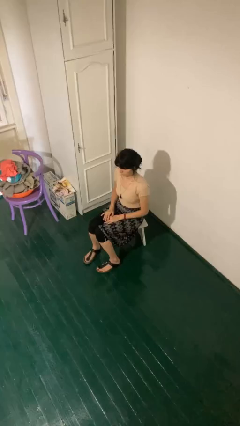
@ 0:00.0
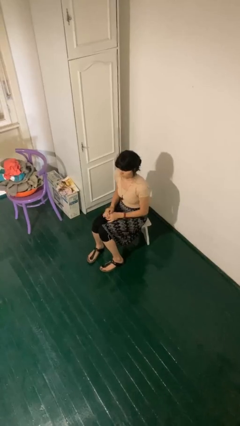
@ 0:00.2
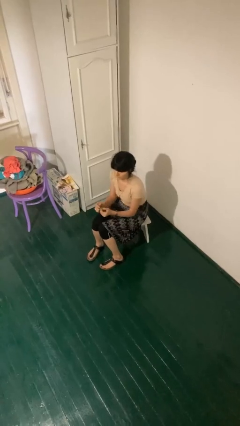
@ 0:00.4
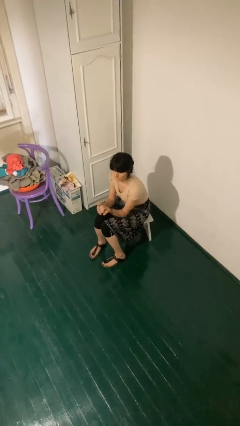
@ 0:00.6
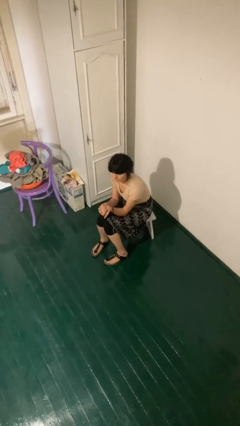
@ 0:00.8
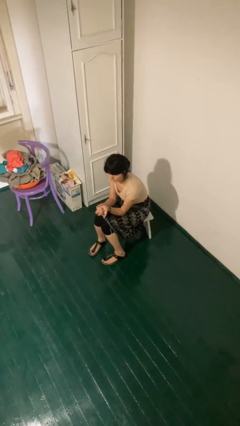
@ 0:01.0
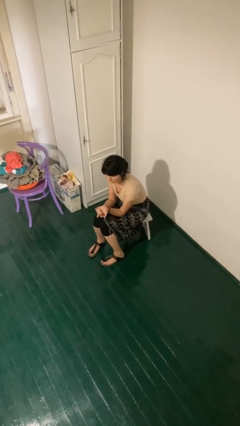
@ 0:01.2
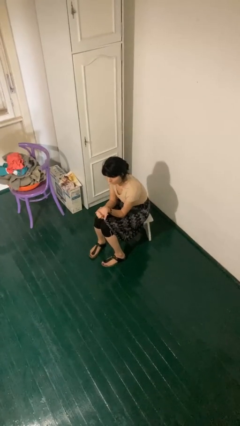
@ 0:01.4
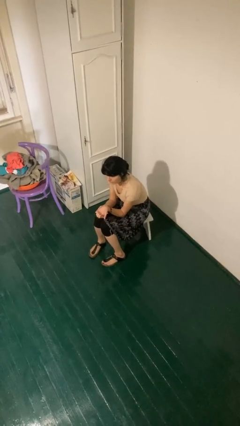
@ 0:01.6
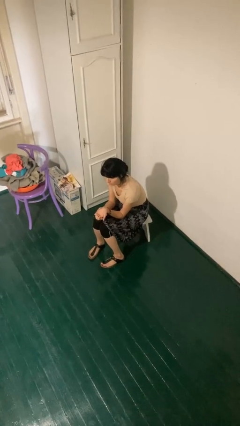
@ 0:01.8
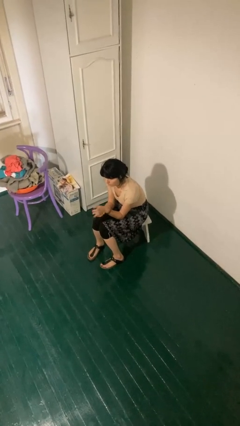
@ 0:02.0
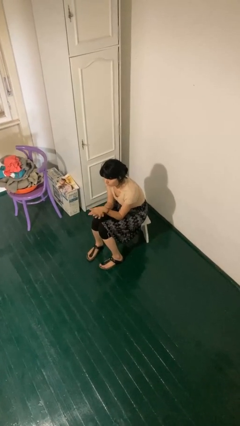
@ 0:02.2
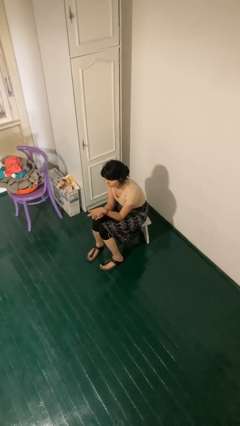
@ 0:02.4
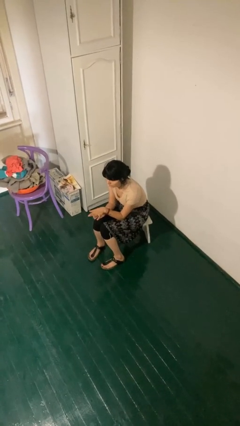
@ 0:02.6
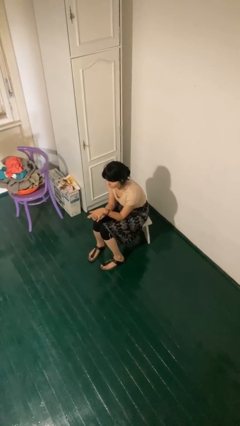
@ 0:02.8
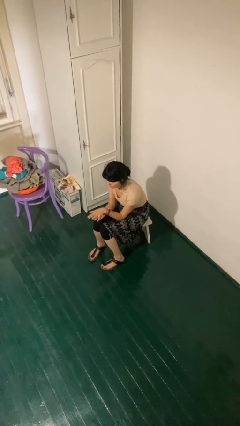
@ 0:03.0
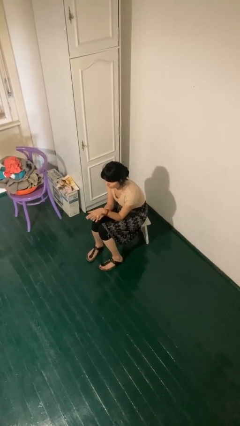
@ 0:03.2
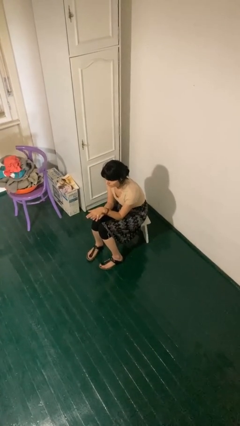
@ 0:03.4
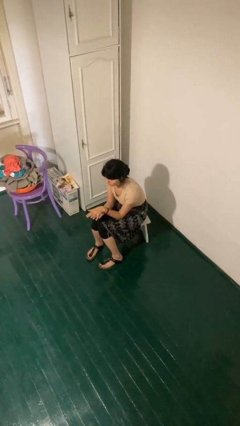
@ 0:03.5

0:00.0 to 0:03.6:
person looks at hands in lap

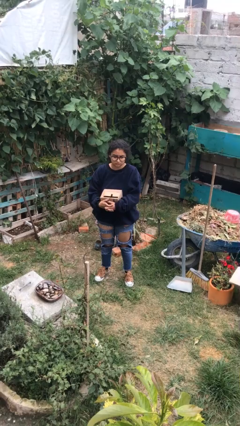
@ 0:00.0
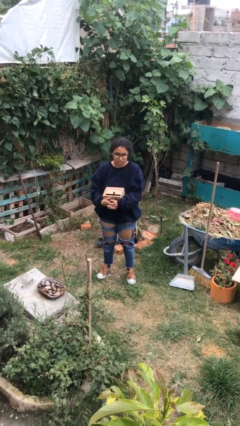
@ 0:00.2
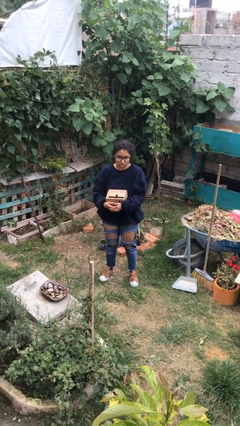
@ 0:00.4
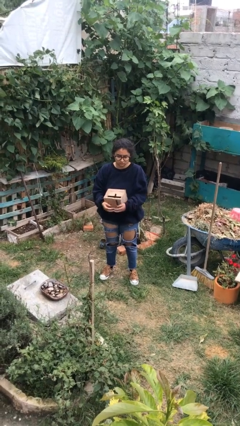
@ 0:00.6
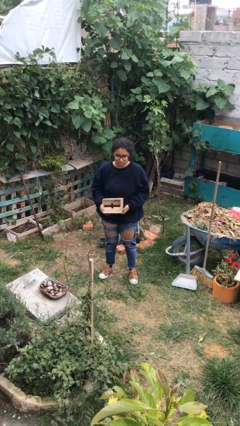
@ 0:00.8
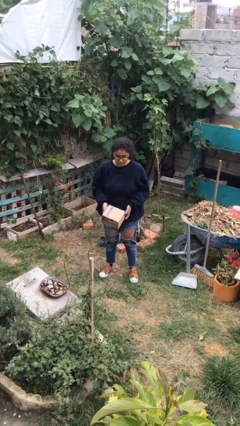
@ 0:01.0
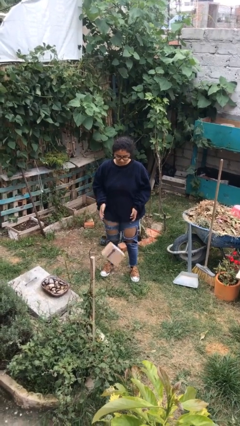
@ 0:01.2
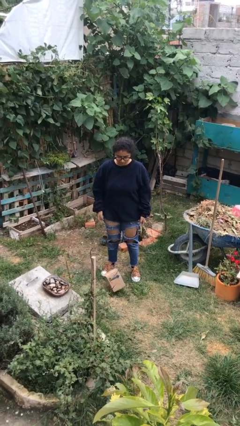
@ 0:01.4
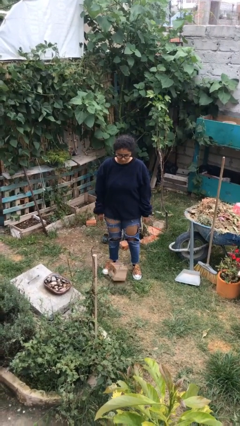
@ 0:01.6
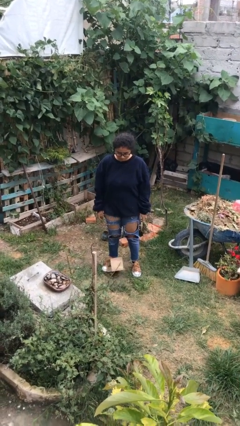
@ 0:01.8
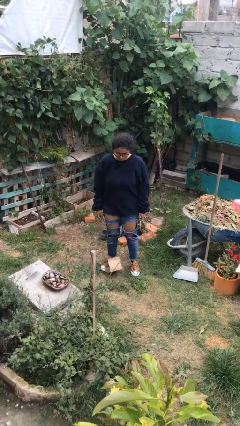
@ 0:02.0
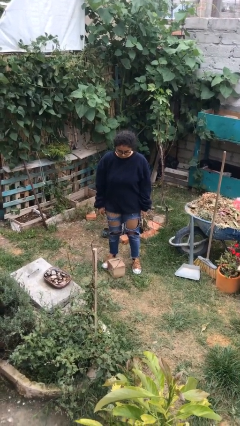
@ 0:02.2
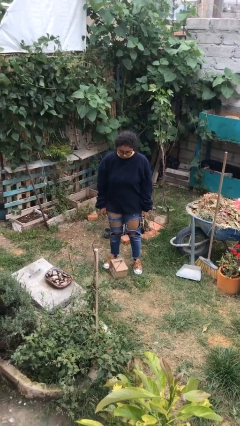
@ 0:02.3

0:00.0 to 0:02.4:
person drops object

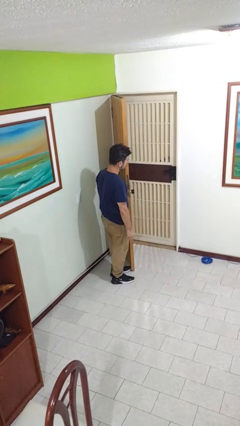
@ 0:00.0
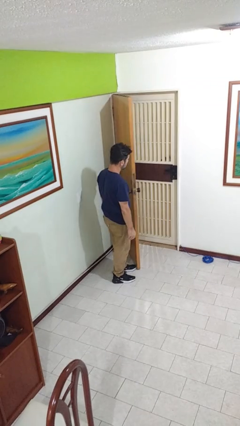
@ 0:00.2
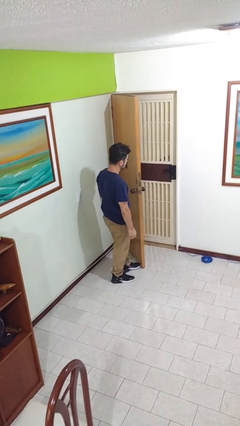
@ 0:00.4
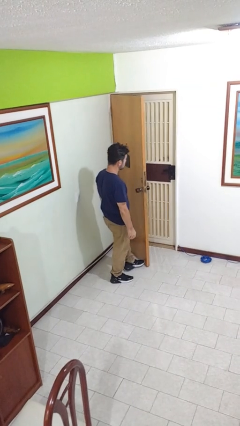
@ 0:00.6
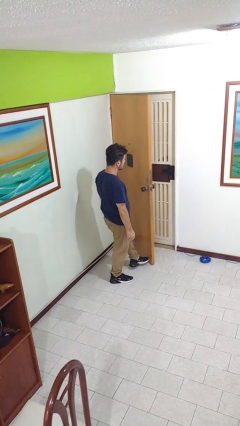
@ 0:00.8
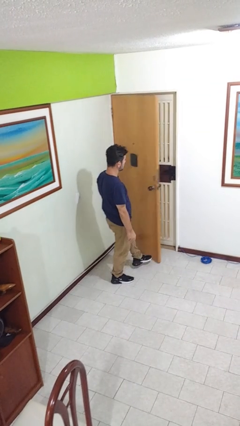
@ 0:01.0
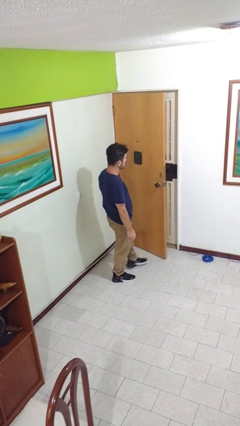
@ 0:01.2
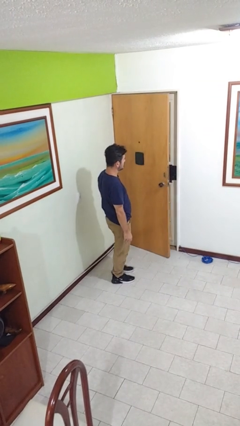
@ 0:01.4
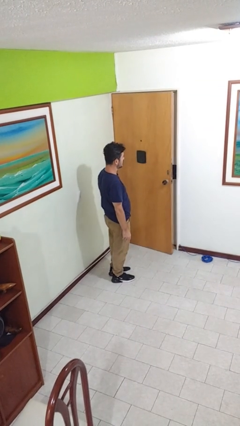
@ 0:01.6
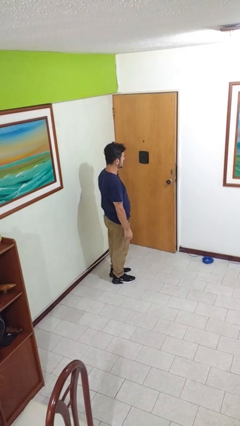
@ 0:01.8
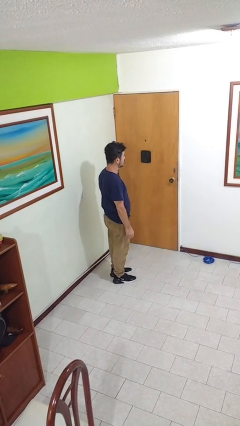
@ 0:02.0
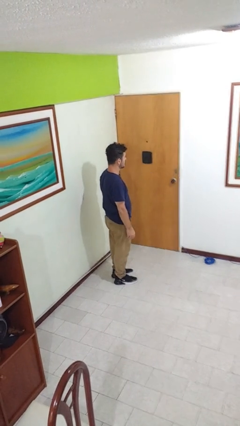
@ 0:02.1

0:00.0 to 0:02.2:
person closes door with foot

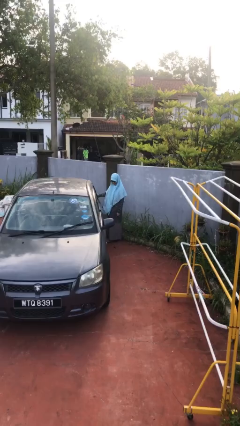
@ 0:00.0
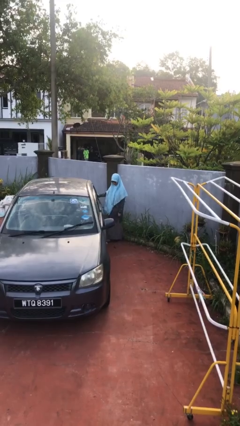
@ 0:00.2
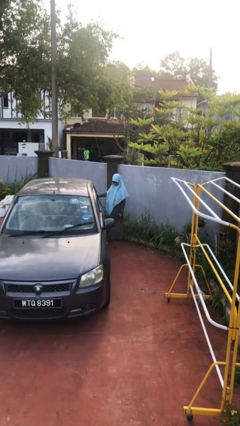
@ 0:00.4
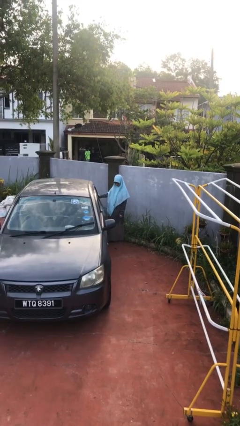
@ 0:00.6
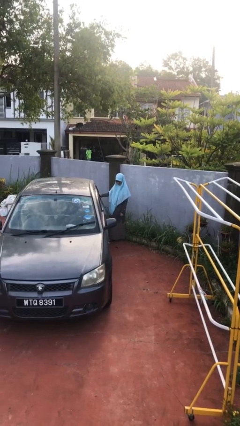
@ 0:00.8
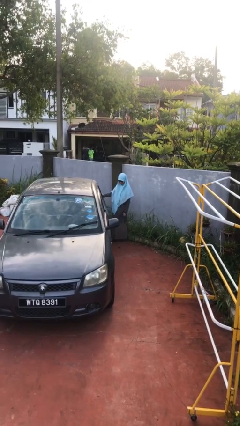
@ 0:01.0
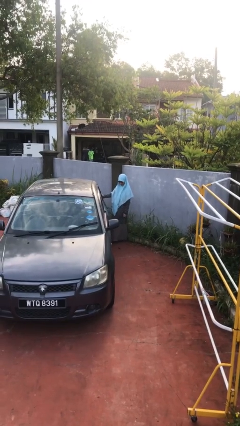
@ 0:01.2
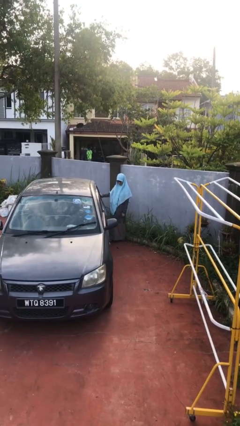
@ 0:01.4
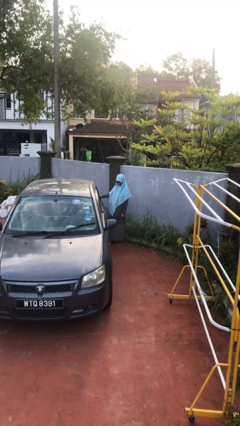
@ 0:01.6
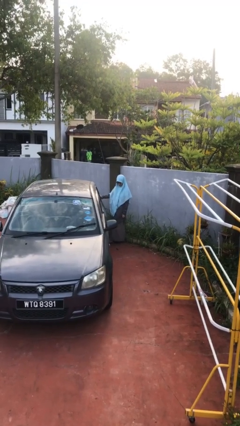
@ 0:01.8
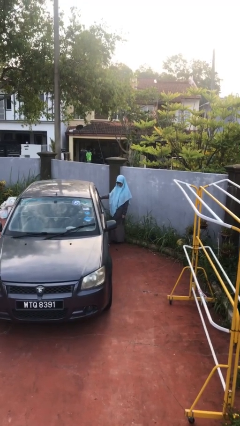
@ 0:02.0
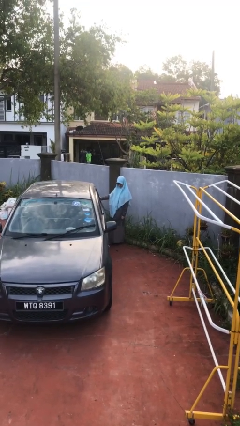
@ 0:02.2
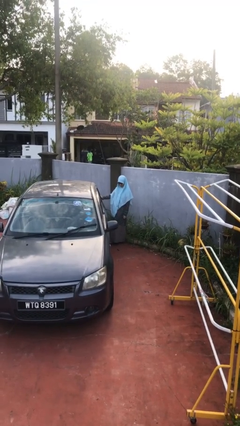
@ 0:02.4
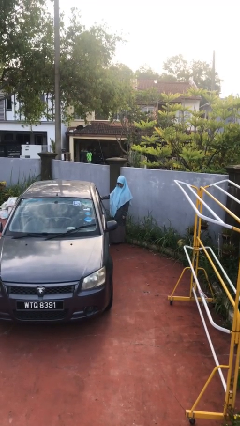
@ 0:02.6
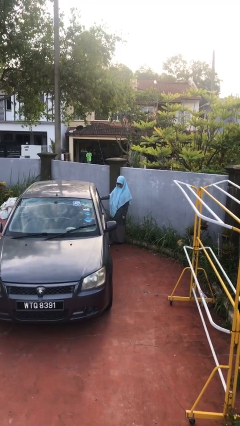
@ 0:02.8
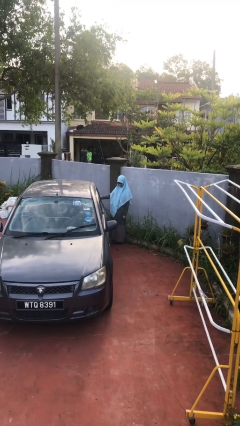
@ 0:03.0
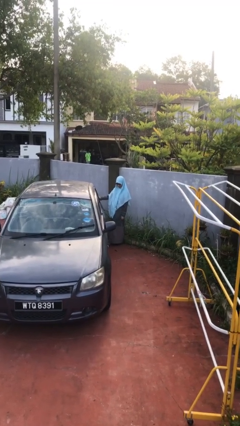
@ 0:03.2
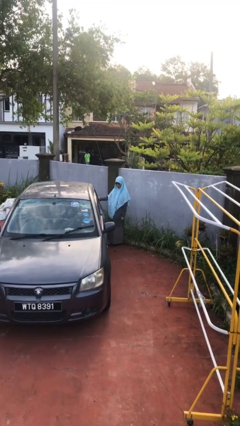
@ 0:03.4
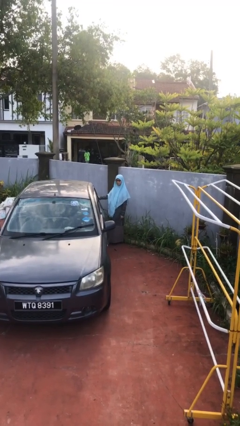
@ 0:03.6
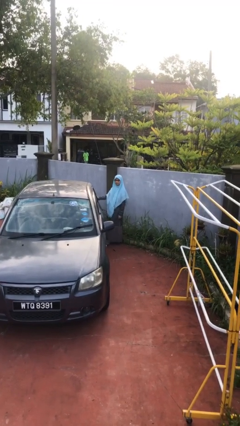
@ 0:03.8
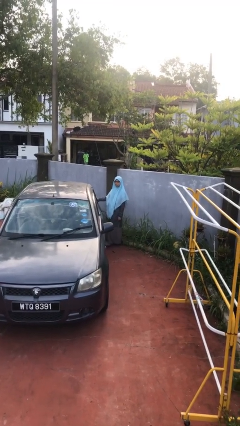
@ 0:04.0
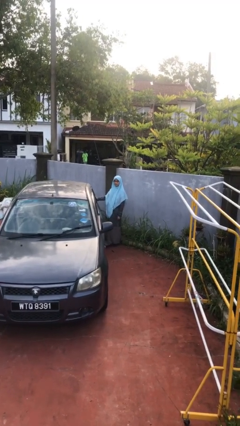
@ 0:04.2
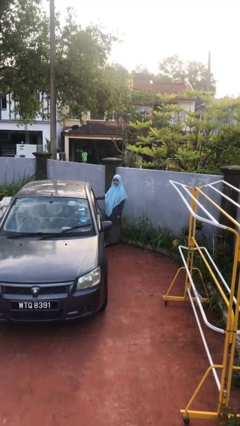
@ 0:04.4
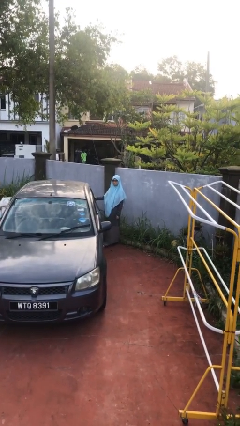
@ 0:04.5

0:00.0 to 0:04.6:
person kicks car tires

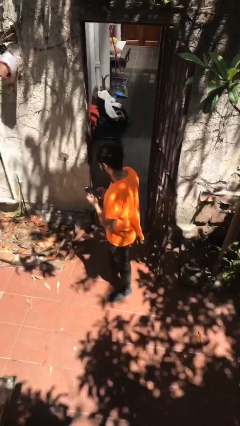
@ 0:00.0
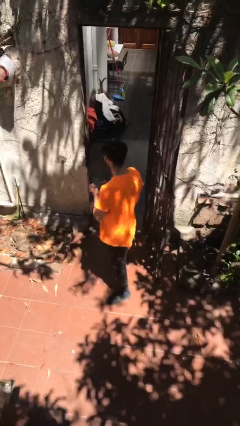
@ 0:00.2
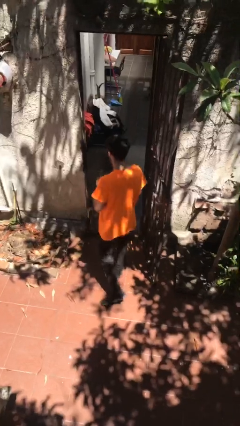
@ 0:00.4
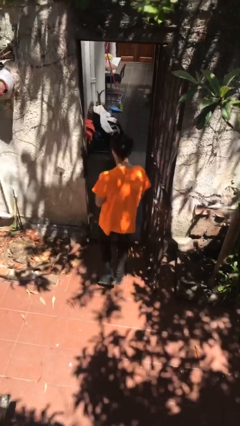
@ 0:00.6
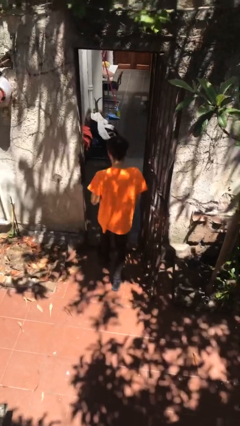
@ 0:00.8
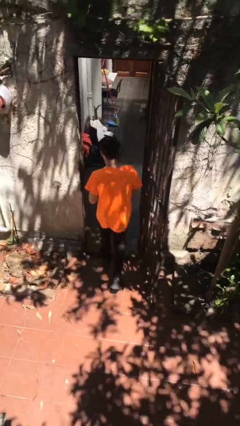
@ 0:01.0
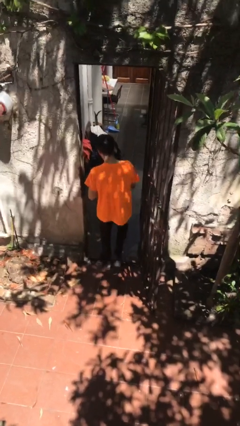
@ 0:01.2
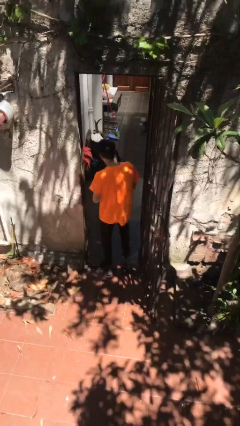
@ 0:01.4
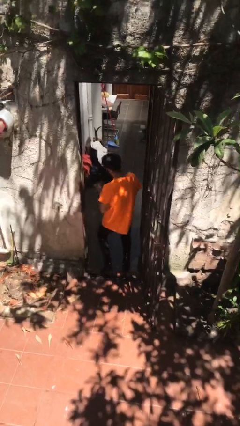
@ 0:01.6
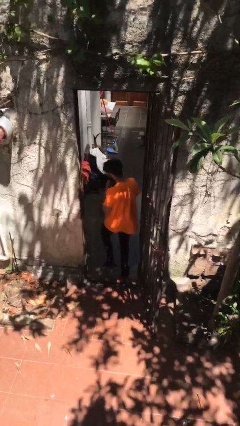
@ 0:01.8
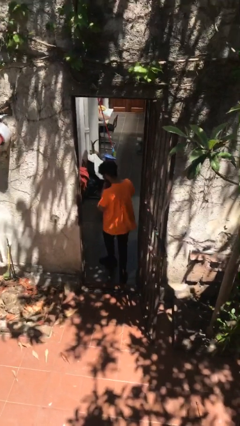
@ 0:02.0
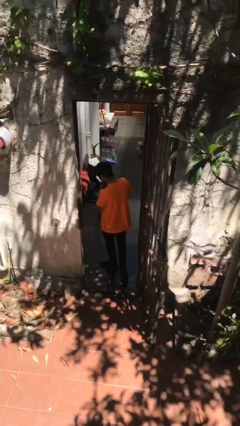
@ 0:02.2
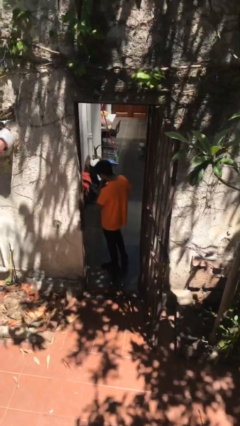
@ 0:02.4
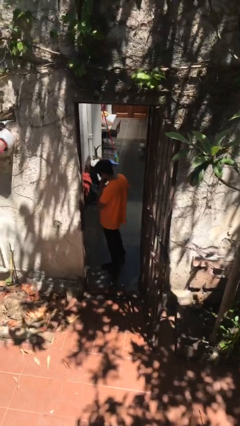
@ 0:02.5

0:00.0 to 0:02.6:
person exits scene through structure

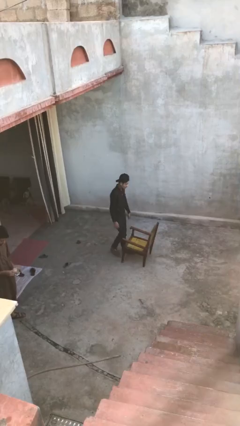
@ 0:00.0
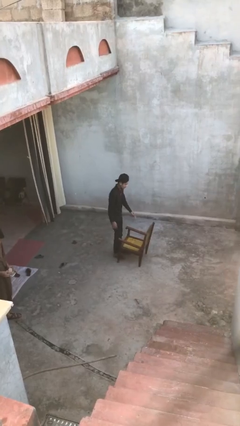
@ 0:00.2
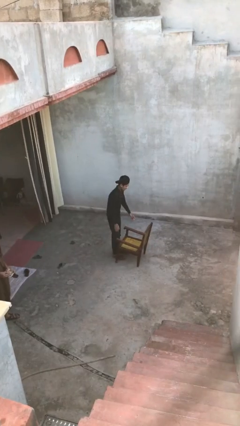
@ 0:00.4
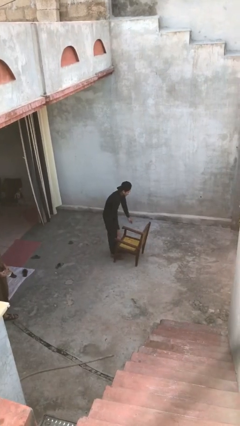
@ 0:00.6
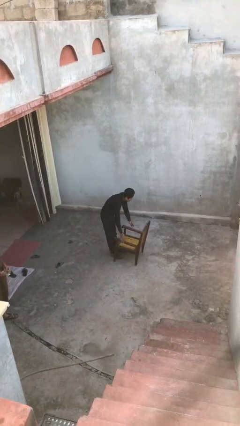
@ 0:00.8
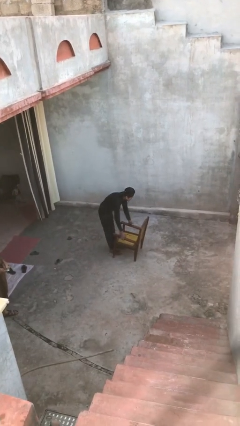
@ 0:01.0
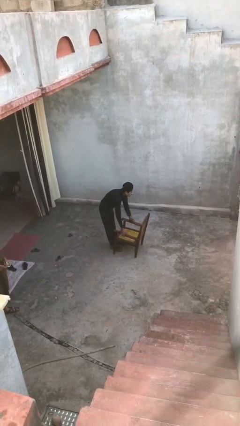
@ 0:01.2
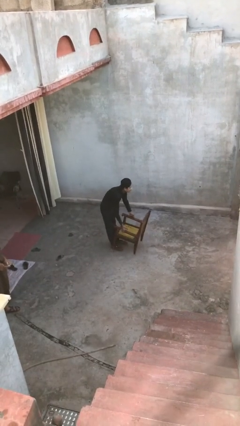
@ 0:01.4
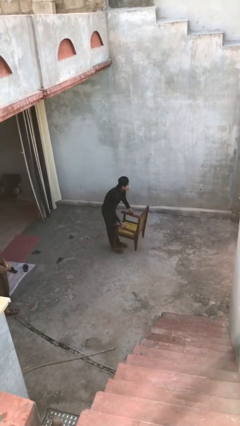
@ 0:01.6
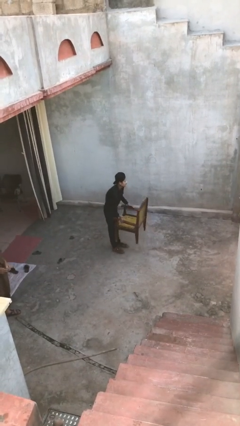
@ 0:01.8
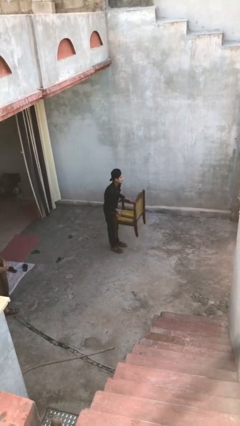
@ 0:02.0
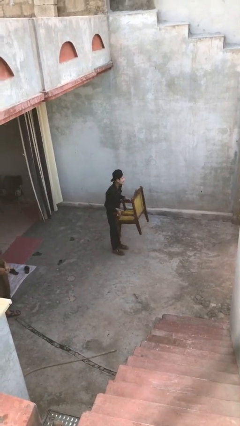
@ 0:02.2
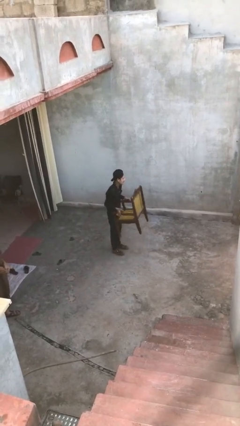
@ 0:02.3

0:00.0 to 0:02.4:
person picks up object from floor
